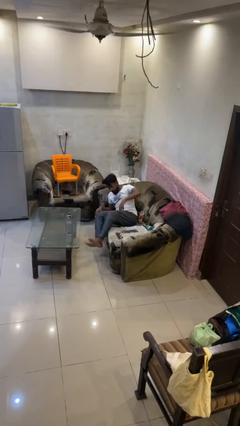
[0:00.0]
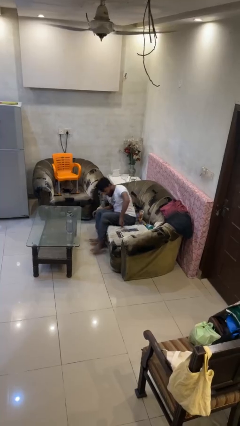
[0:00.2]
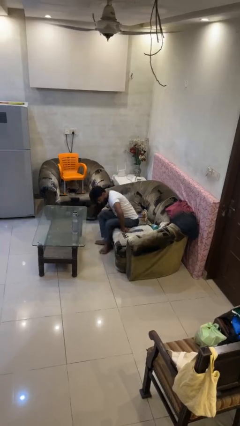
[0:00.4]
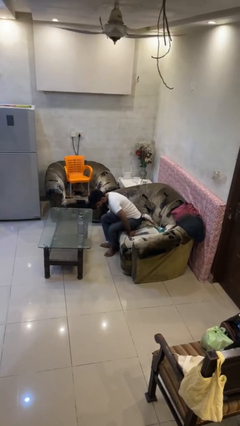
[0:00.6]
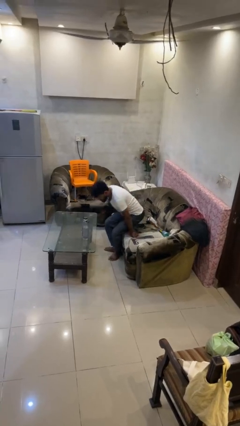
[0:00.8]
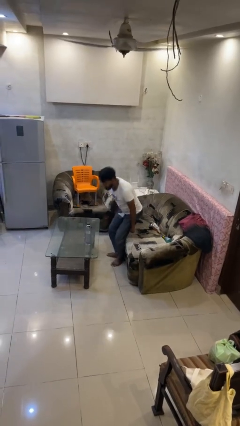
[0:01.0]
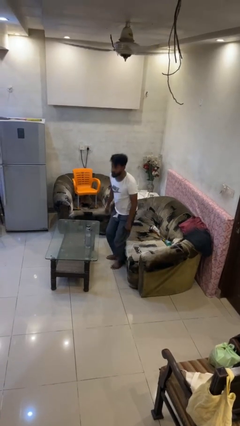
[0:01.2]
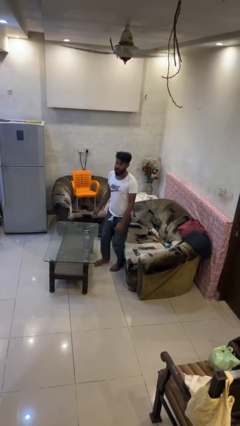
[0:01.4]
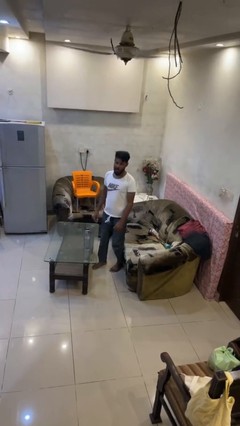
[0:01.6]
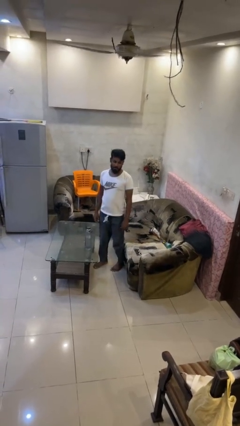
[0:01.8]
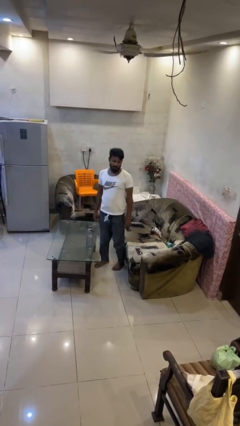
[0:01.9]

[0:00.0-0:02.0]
person stands up

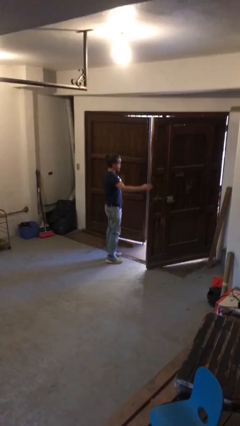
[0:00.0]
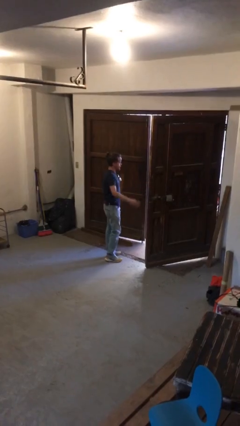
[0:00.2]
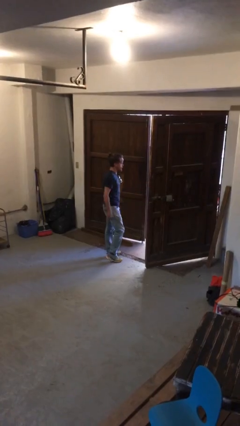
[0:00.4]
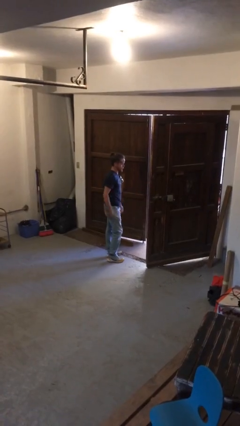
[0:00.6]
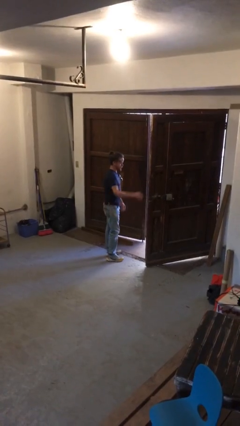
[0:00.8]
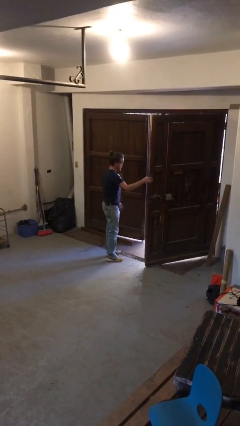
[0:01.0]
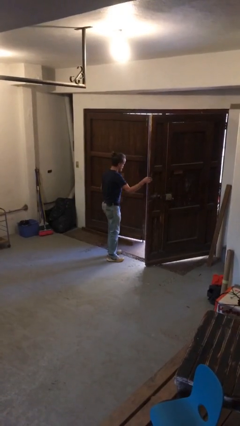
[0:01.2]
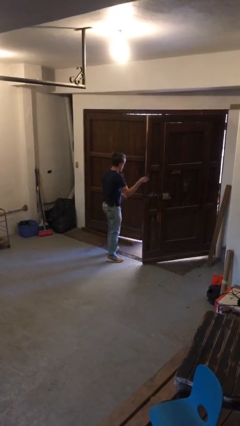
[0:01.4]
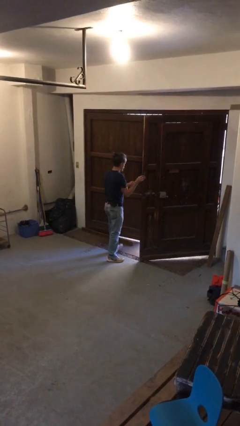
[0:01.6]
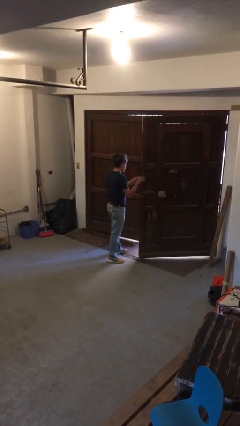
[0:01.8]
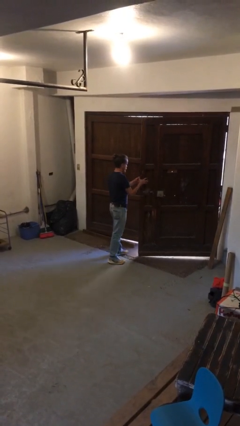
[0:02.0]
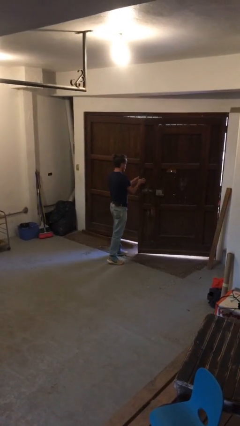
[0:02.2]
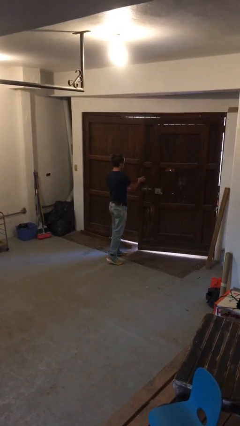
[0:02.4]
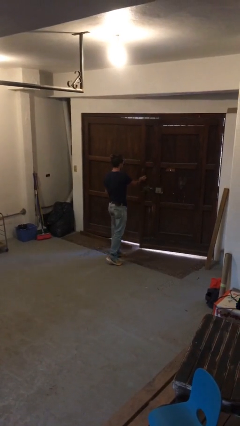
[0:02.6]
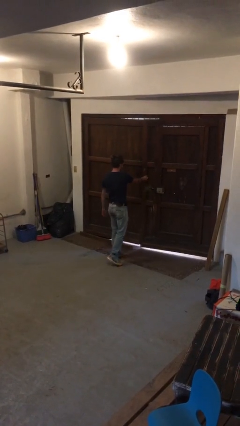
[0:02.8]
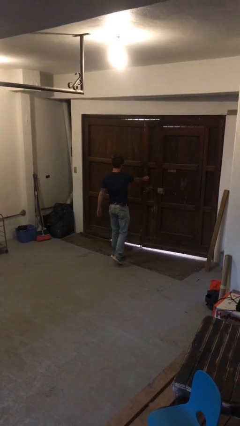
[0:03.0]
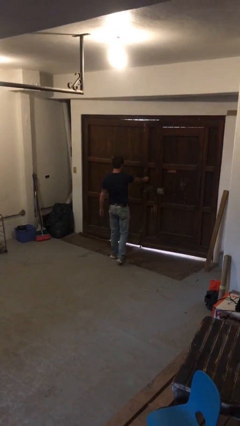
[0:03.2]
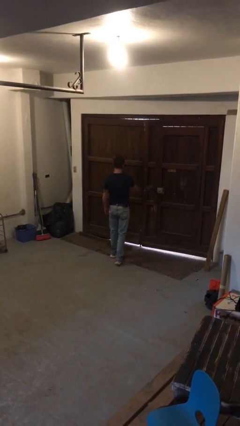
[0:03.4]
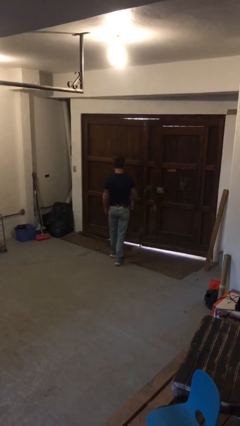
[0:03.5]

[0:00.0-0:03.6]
person closes gate

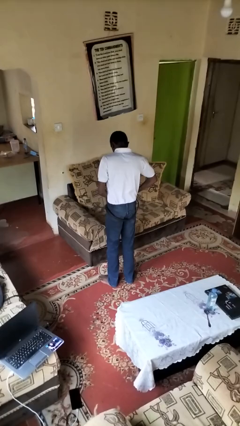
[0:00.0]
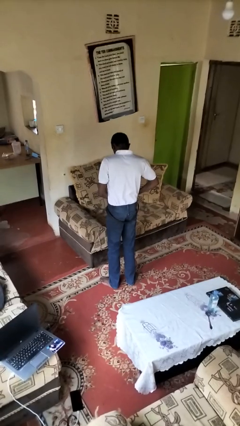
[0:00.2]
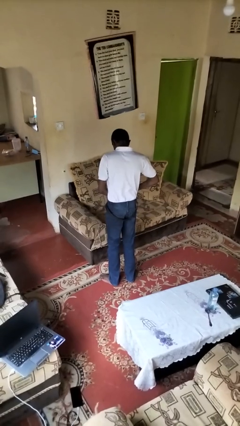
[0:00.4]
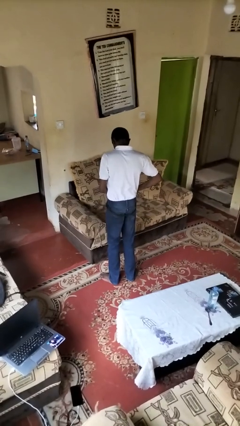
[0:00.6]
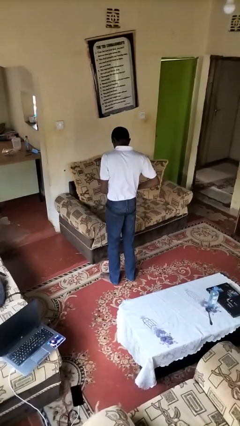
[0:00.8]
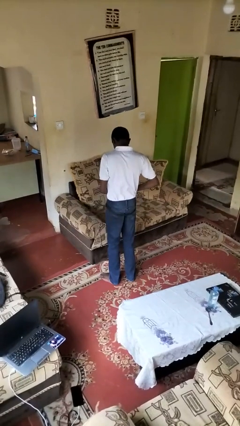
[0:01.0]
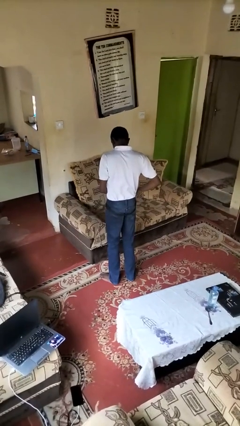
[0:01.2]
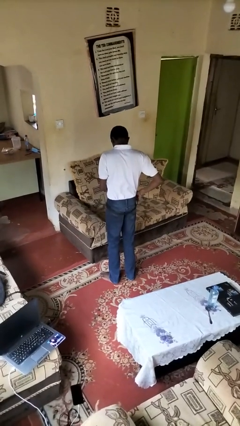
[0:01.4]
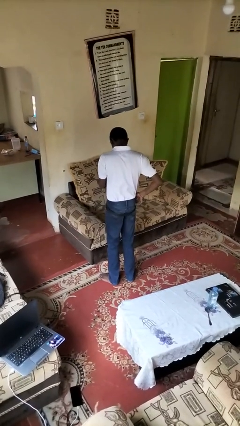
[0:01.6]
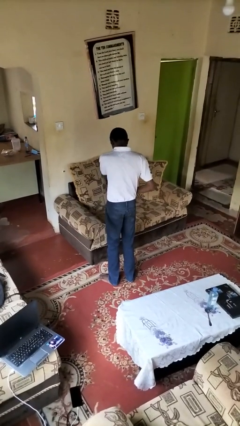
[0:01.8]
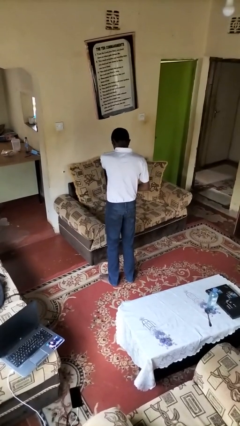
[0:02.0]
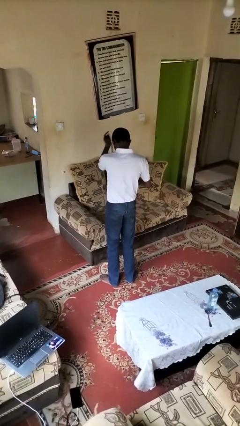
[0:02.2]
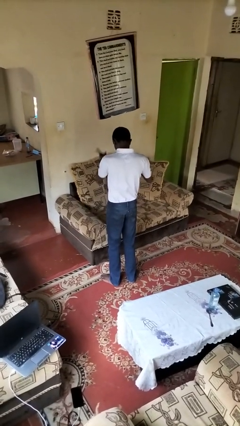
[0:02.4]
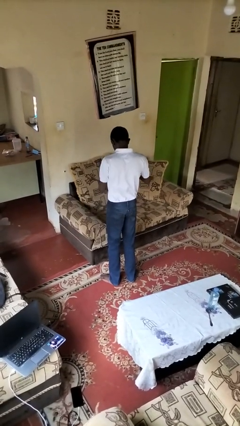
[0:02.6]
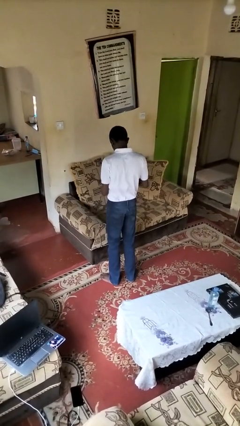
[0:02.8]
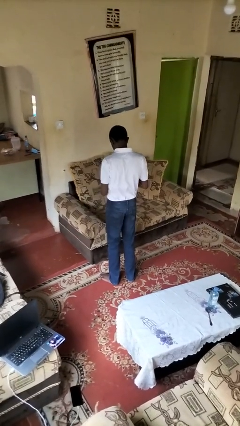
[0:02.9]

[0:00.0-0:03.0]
person takes off belt

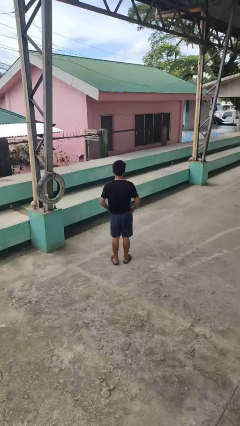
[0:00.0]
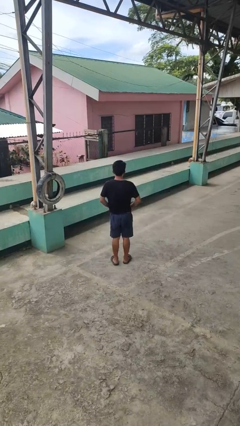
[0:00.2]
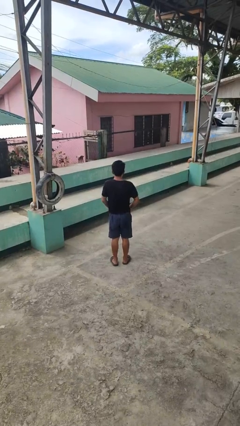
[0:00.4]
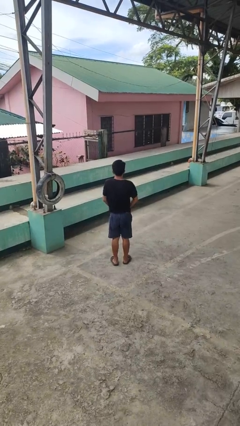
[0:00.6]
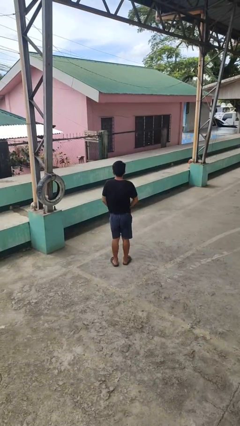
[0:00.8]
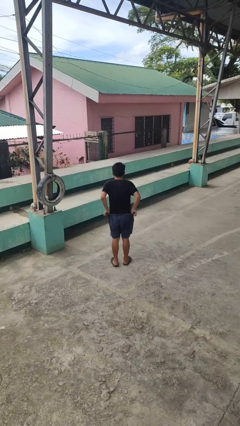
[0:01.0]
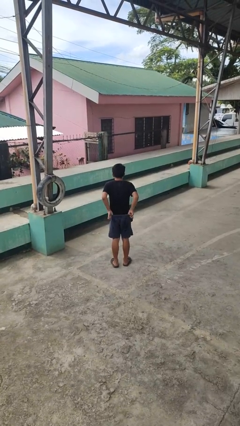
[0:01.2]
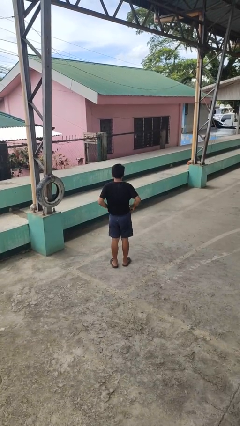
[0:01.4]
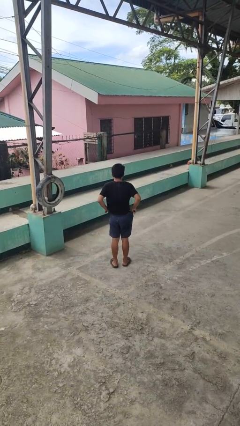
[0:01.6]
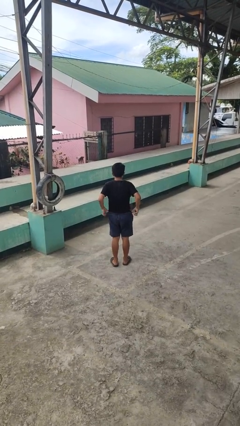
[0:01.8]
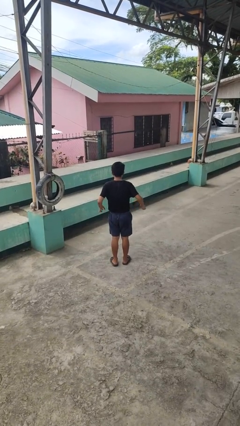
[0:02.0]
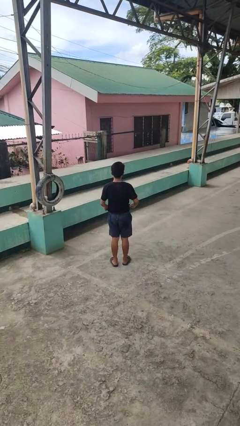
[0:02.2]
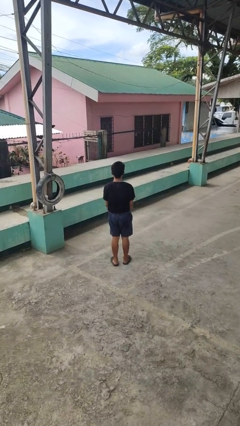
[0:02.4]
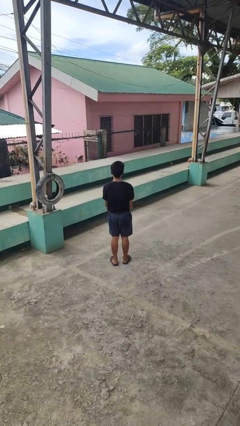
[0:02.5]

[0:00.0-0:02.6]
person hikes up pants

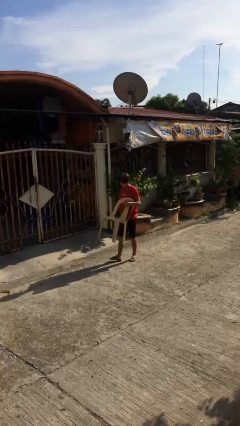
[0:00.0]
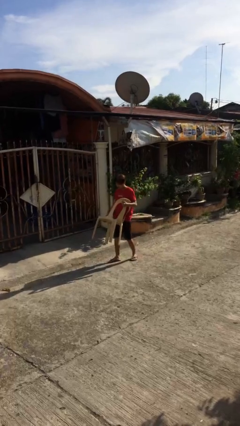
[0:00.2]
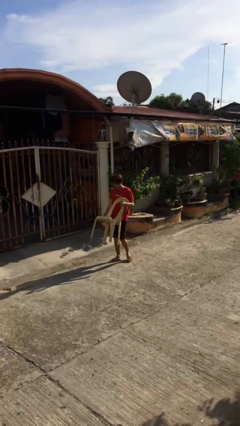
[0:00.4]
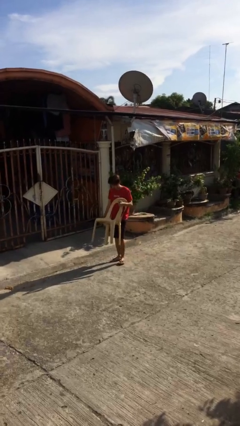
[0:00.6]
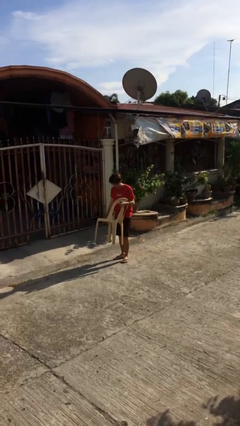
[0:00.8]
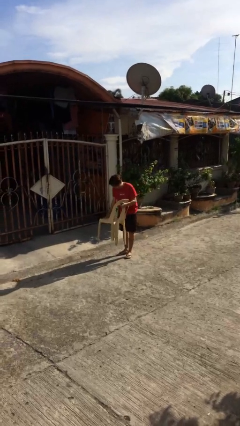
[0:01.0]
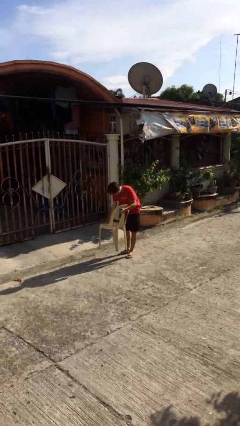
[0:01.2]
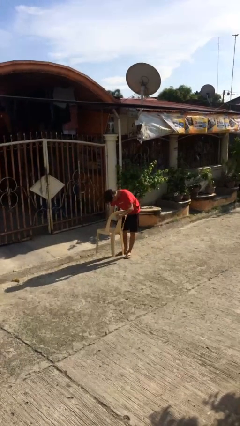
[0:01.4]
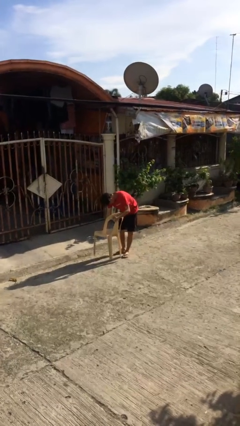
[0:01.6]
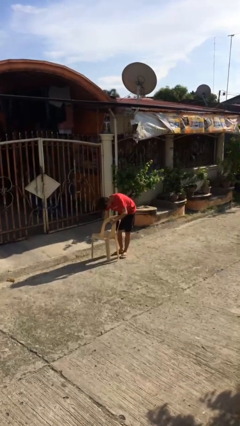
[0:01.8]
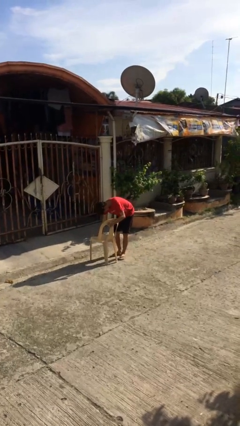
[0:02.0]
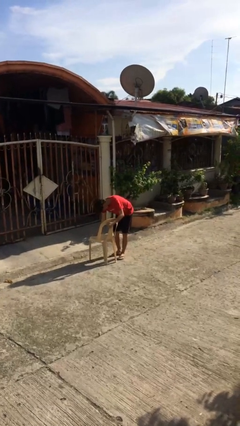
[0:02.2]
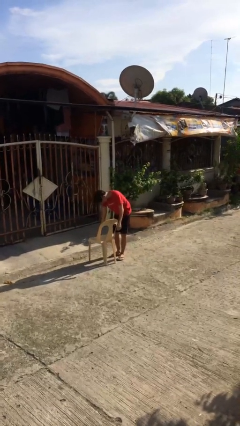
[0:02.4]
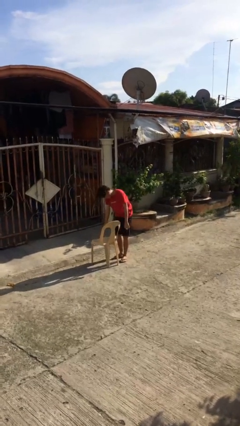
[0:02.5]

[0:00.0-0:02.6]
person puts down object on floor

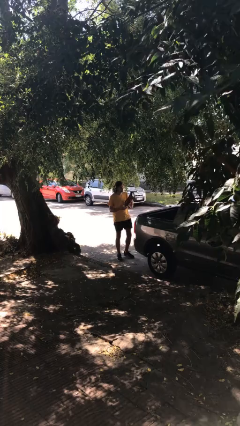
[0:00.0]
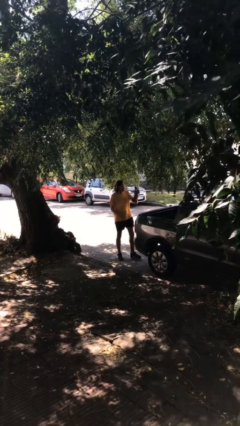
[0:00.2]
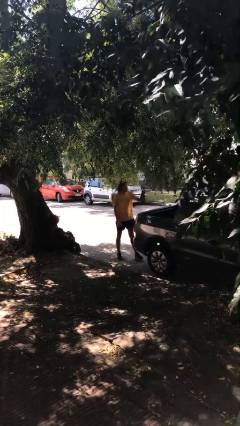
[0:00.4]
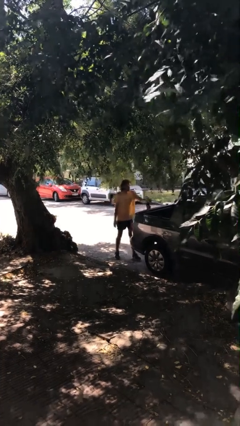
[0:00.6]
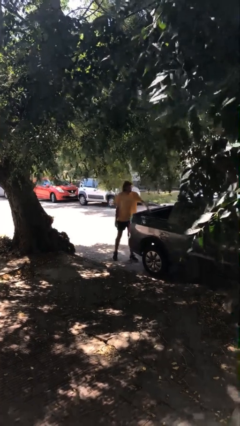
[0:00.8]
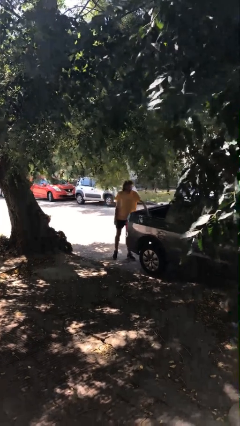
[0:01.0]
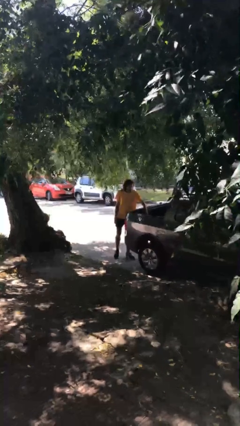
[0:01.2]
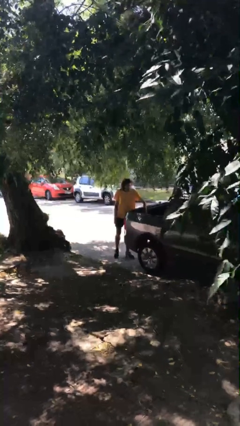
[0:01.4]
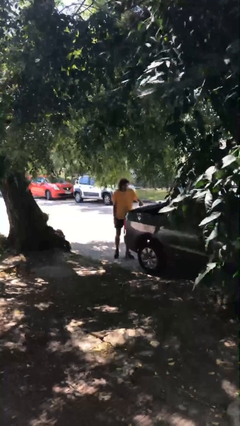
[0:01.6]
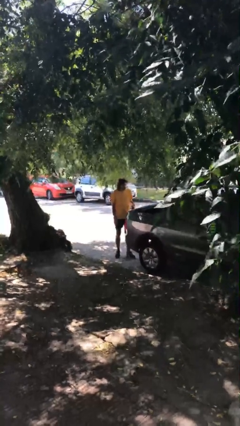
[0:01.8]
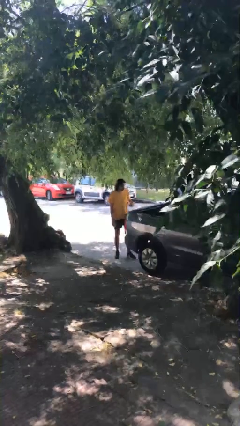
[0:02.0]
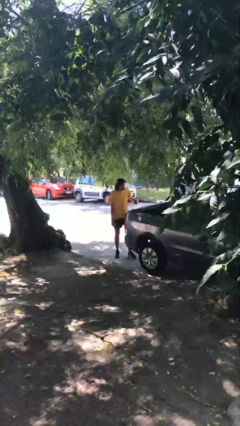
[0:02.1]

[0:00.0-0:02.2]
person loads car

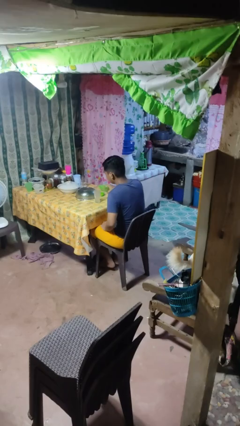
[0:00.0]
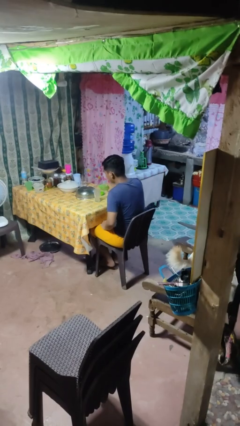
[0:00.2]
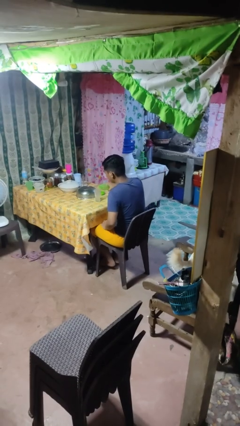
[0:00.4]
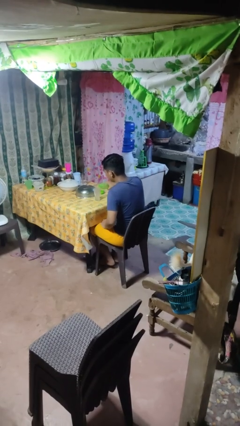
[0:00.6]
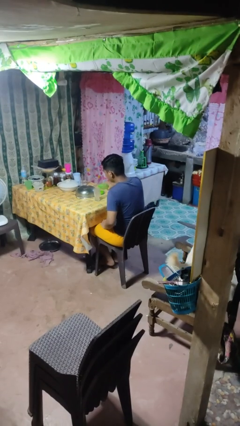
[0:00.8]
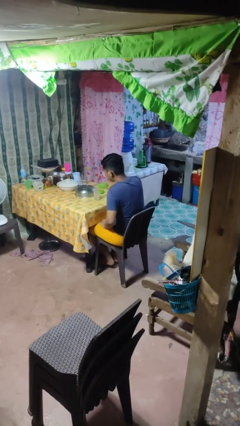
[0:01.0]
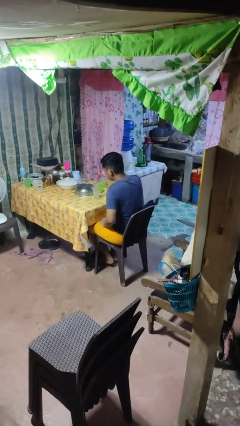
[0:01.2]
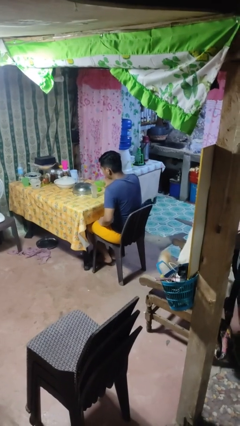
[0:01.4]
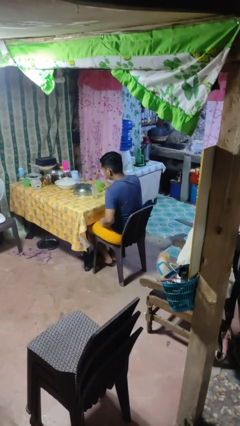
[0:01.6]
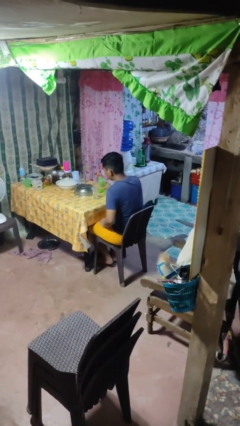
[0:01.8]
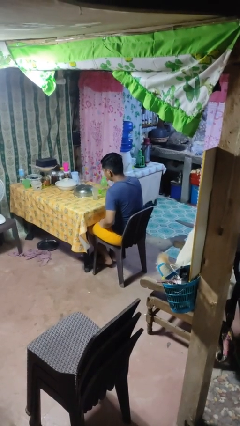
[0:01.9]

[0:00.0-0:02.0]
person pours liquid into cup
